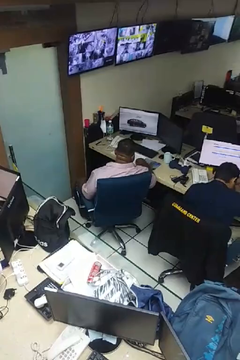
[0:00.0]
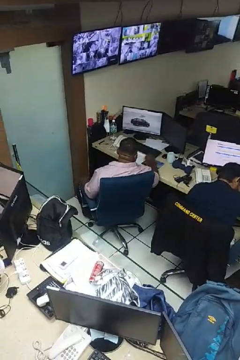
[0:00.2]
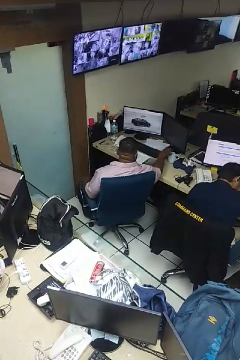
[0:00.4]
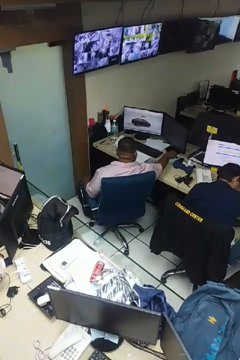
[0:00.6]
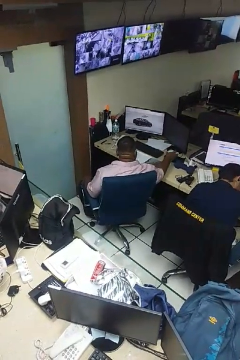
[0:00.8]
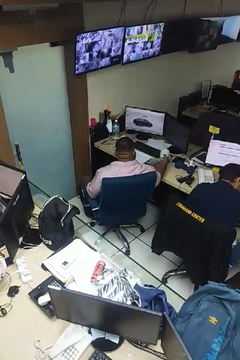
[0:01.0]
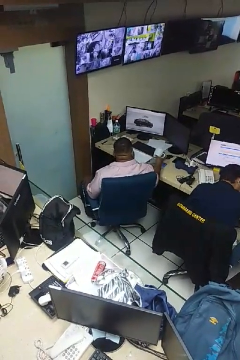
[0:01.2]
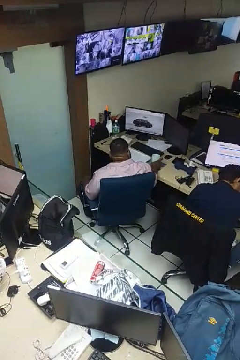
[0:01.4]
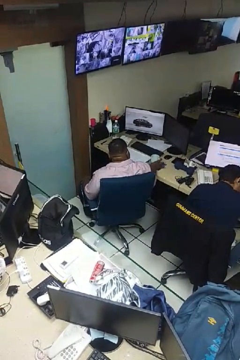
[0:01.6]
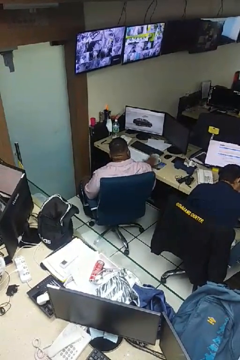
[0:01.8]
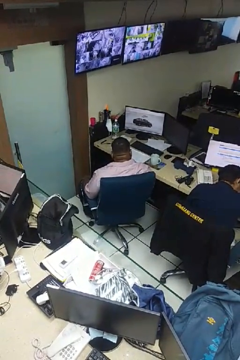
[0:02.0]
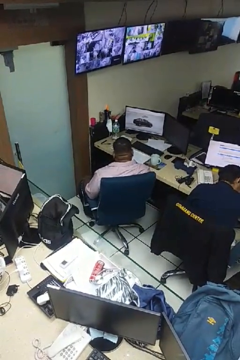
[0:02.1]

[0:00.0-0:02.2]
person sets upright glass

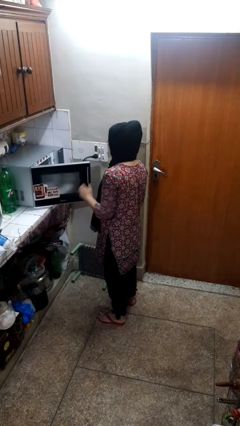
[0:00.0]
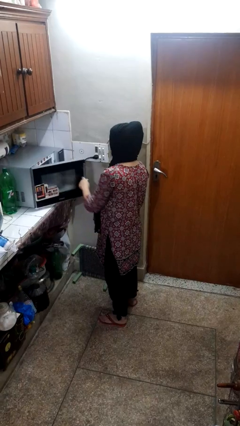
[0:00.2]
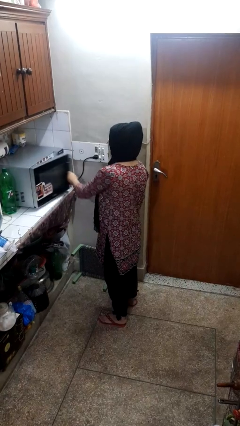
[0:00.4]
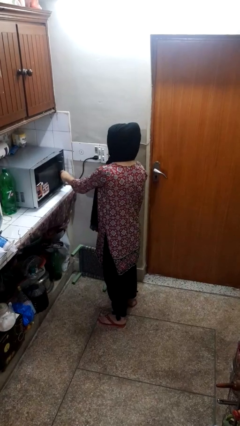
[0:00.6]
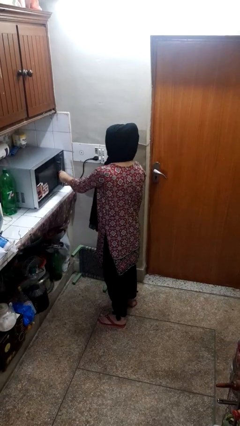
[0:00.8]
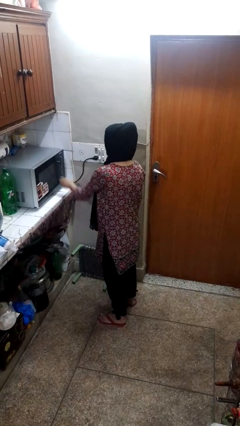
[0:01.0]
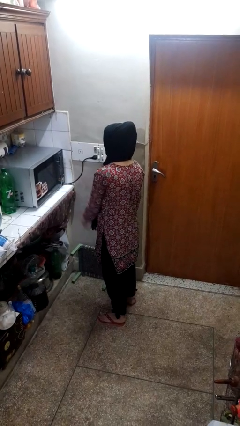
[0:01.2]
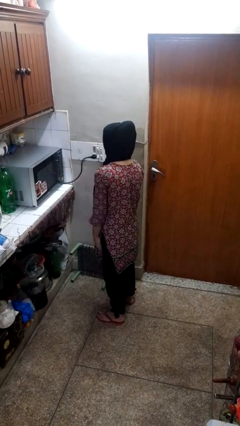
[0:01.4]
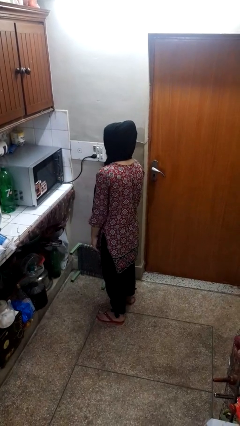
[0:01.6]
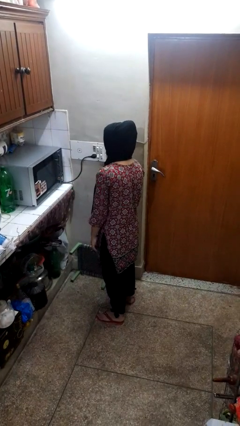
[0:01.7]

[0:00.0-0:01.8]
person closes oven door

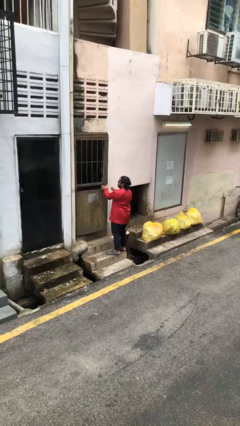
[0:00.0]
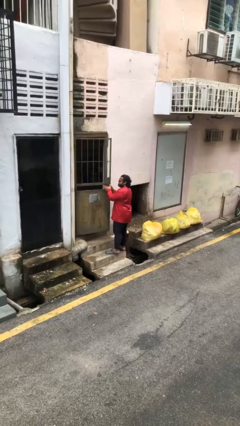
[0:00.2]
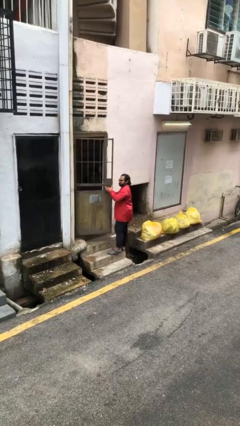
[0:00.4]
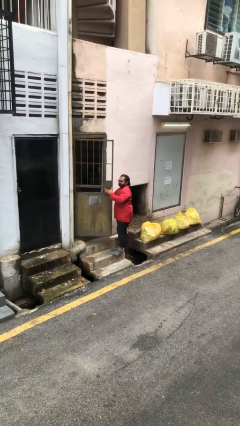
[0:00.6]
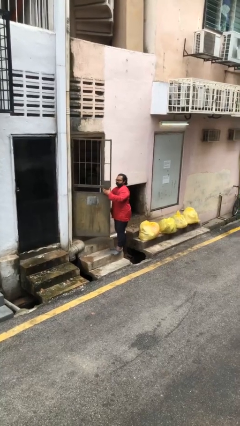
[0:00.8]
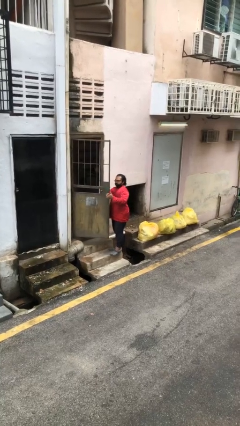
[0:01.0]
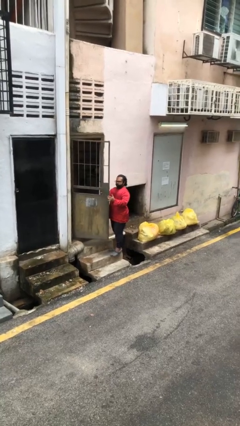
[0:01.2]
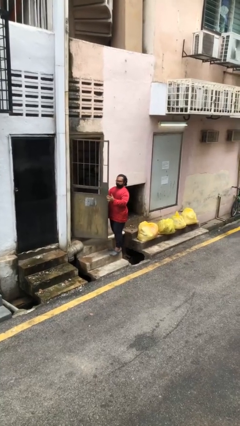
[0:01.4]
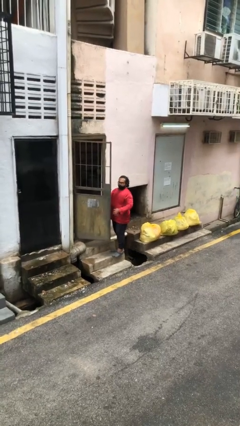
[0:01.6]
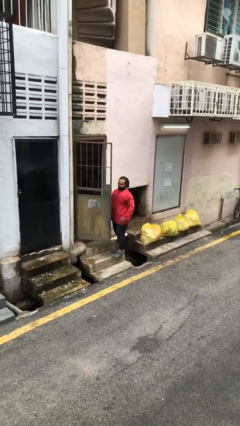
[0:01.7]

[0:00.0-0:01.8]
person opens facility door

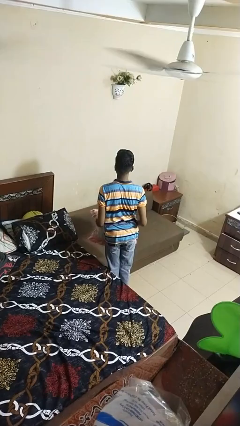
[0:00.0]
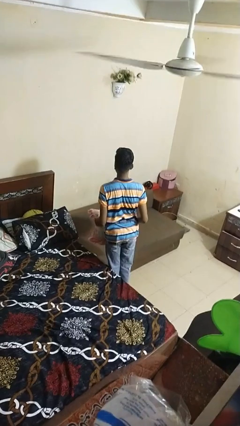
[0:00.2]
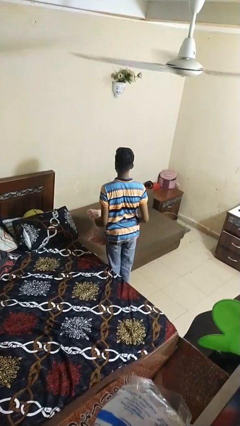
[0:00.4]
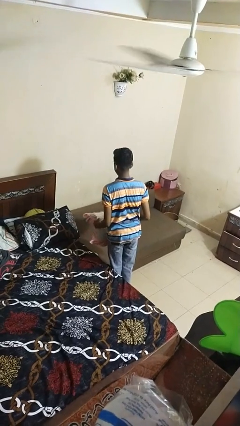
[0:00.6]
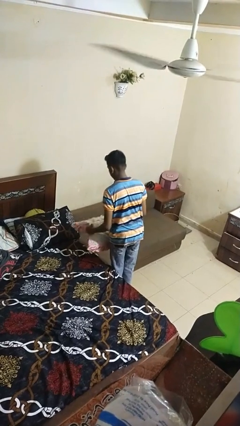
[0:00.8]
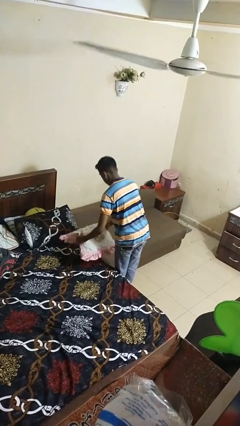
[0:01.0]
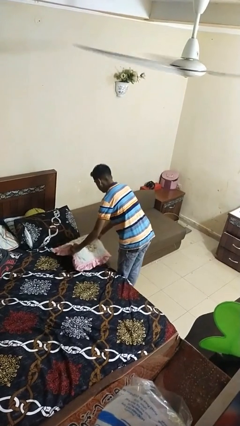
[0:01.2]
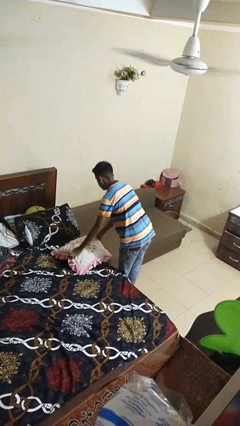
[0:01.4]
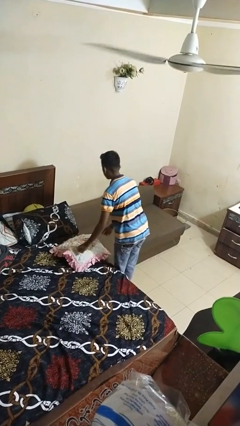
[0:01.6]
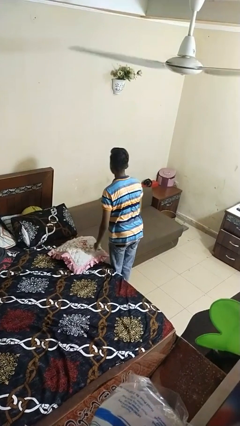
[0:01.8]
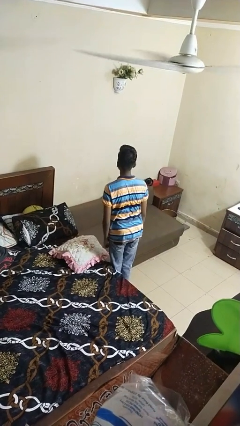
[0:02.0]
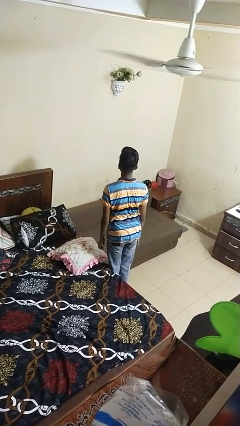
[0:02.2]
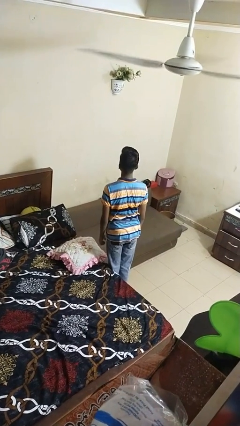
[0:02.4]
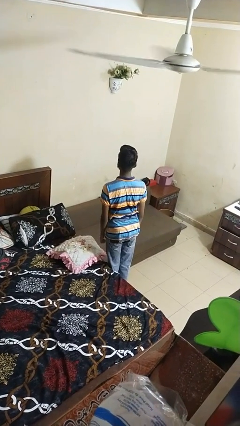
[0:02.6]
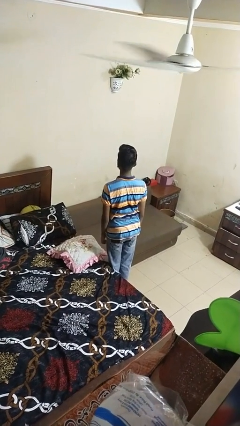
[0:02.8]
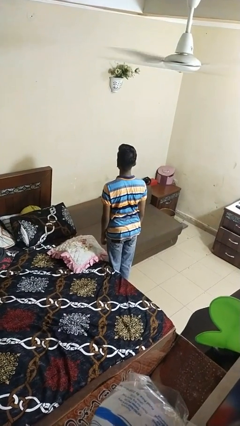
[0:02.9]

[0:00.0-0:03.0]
person puts down object on bed

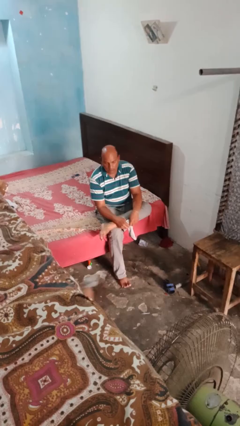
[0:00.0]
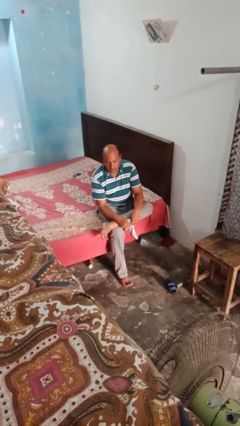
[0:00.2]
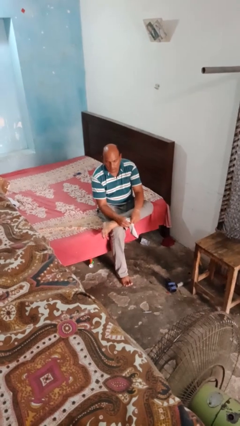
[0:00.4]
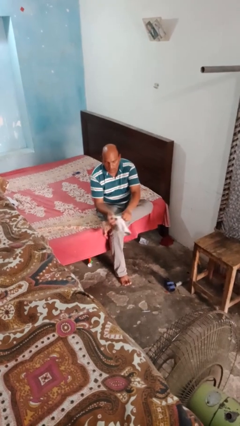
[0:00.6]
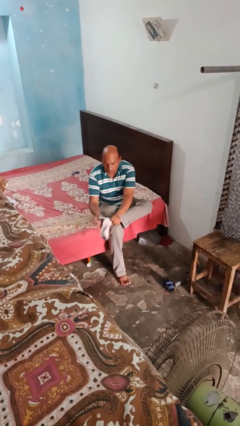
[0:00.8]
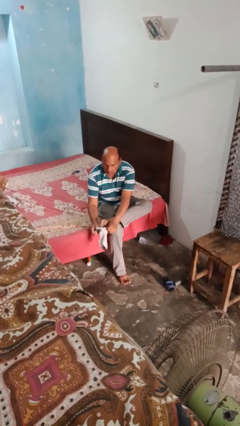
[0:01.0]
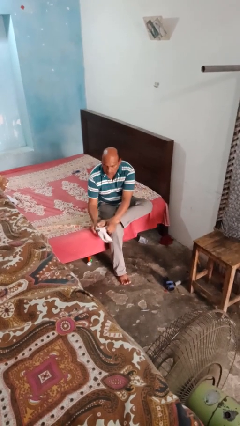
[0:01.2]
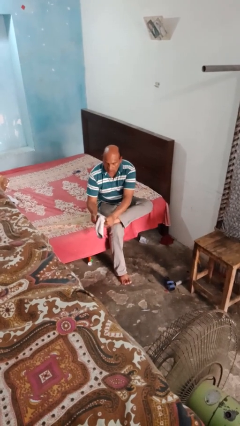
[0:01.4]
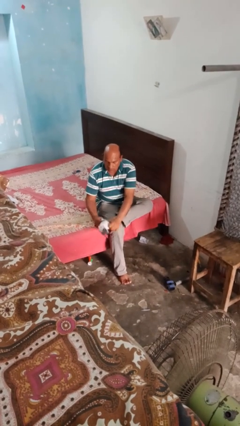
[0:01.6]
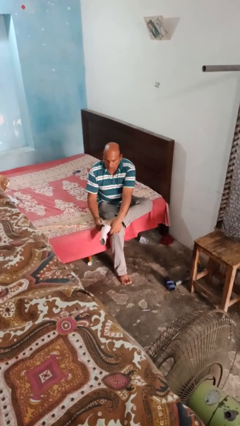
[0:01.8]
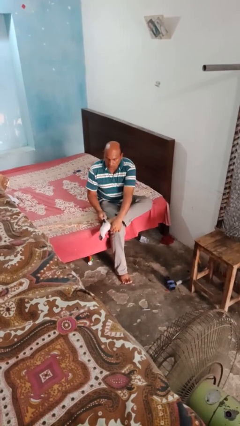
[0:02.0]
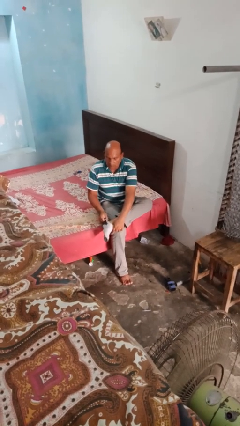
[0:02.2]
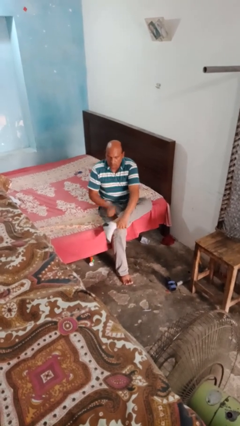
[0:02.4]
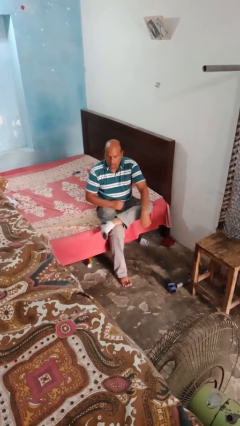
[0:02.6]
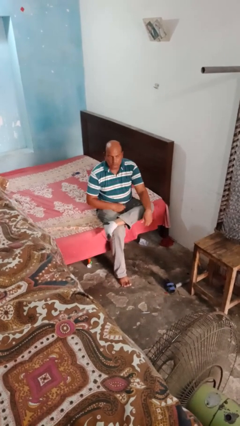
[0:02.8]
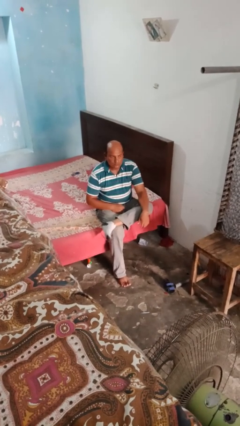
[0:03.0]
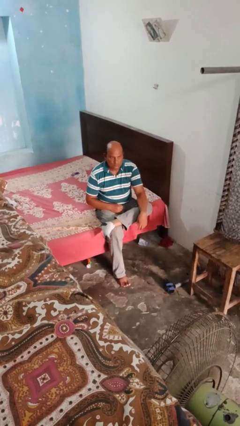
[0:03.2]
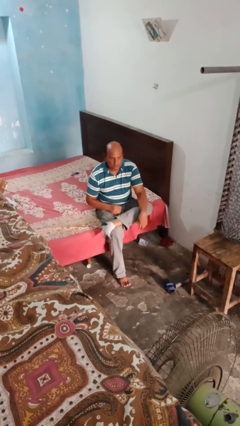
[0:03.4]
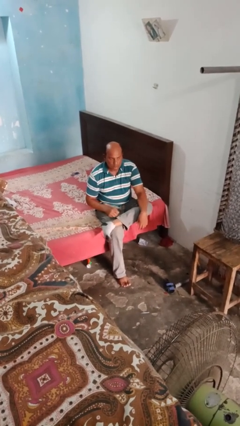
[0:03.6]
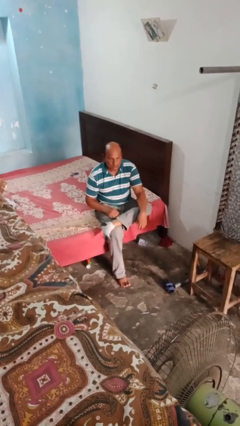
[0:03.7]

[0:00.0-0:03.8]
person puts on socks

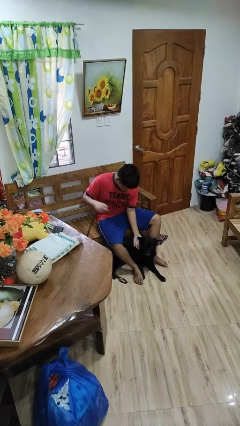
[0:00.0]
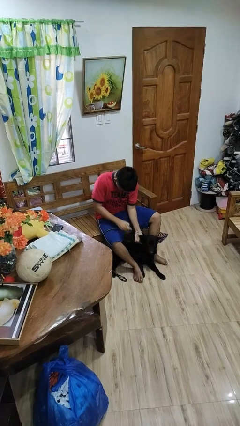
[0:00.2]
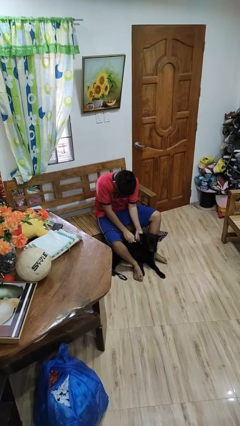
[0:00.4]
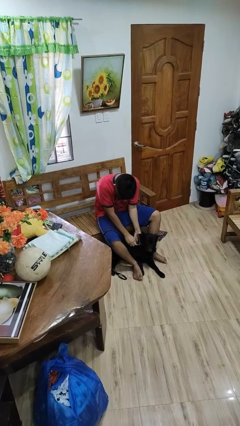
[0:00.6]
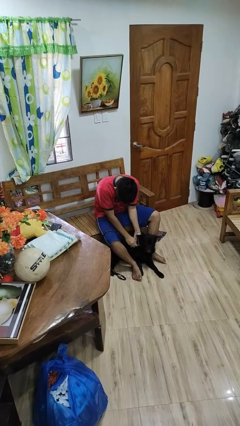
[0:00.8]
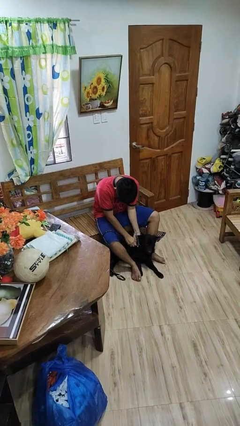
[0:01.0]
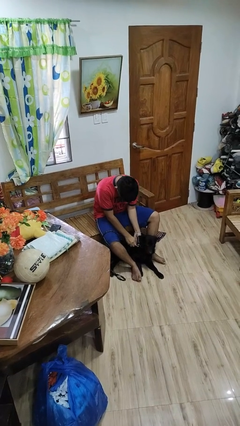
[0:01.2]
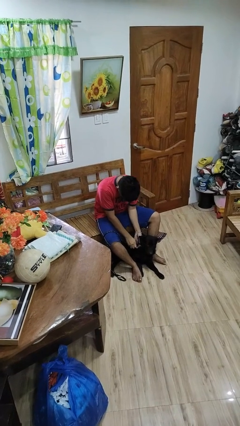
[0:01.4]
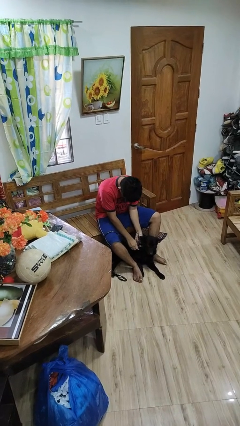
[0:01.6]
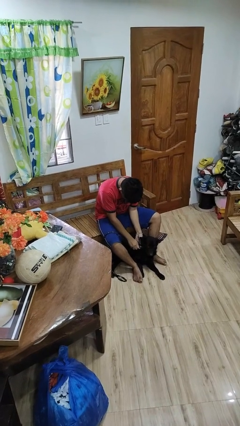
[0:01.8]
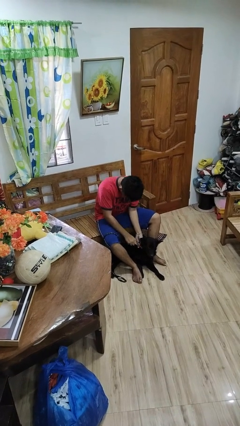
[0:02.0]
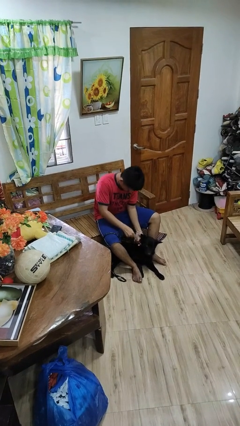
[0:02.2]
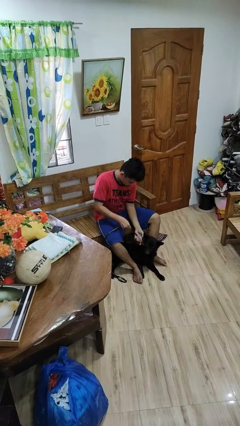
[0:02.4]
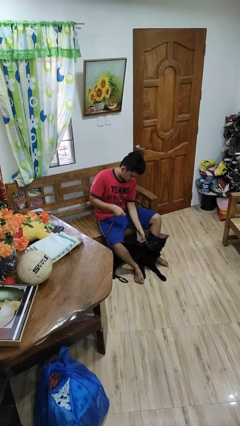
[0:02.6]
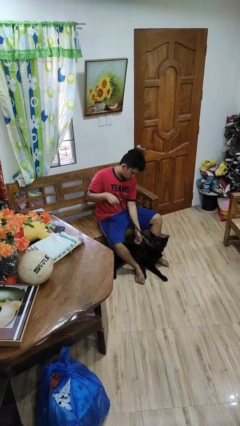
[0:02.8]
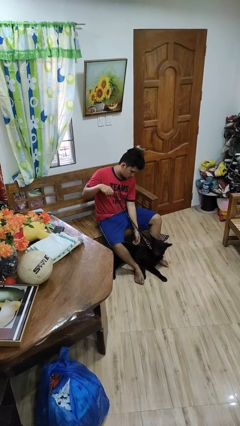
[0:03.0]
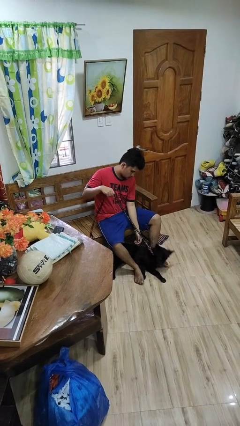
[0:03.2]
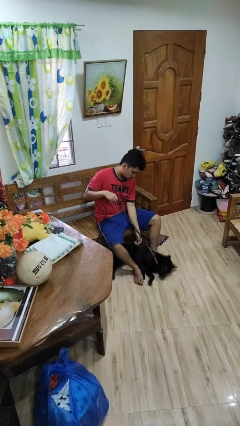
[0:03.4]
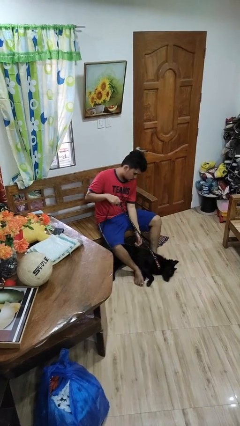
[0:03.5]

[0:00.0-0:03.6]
person attaches leash to dog

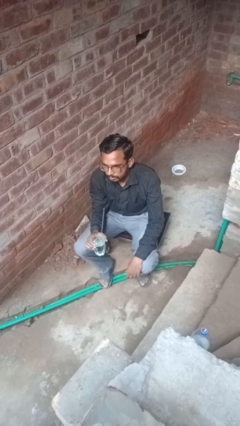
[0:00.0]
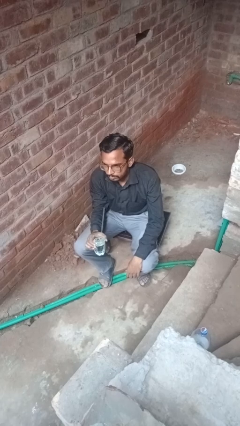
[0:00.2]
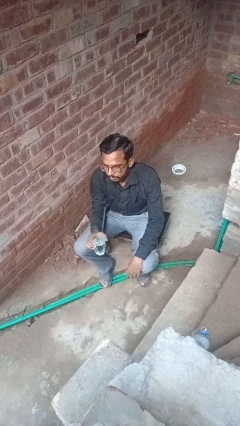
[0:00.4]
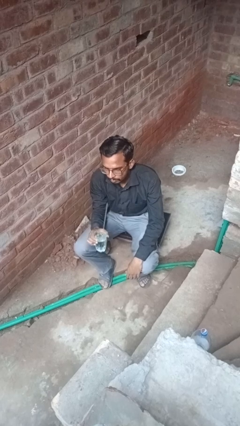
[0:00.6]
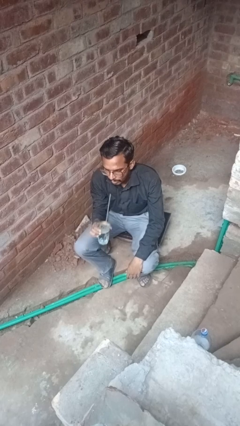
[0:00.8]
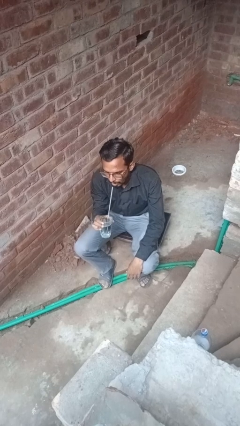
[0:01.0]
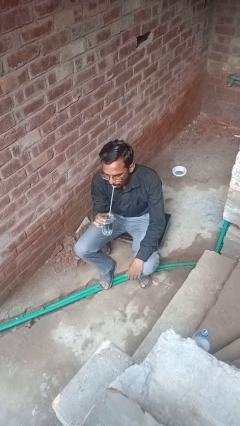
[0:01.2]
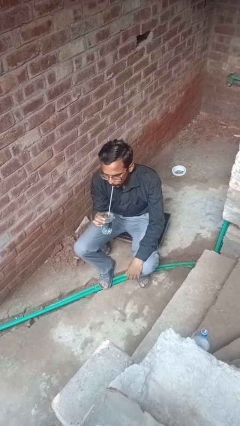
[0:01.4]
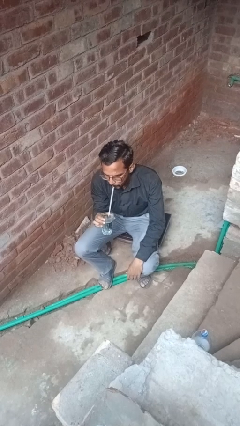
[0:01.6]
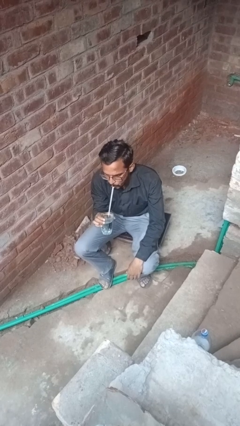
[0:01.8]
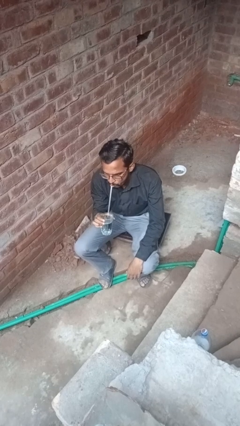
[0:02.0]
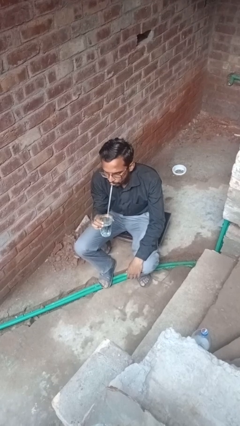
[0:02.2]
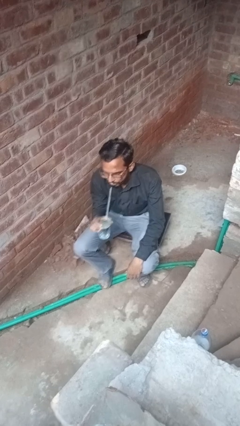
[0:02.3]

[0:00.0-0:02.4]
person drinks from straw
